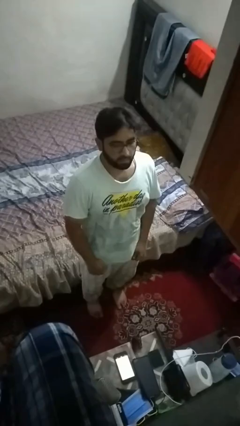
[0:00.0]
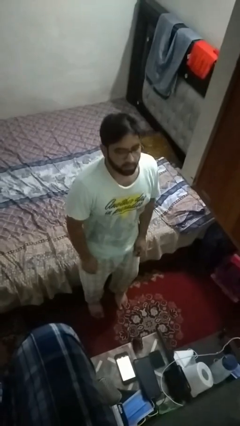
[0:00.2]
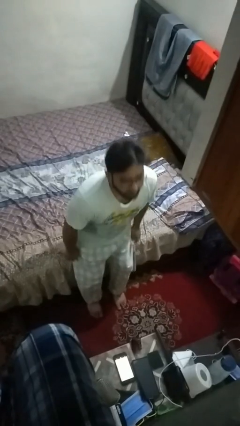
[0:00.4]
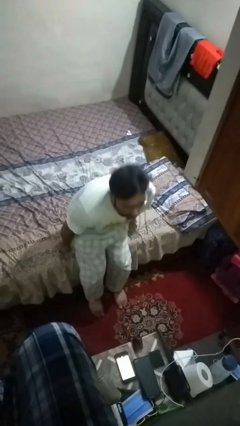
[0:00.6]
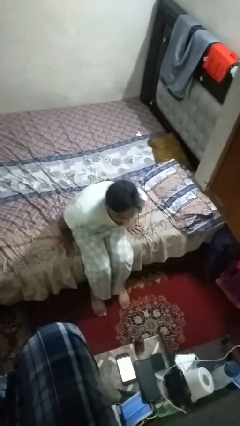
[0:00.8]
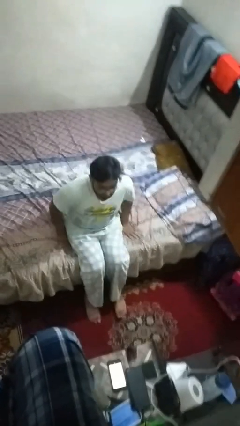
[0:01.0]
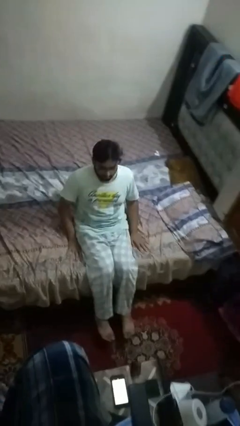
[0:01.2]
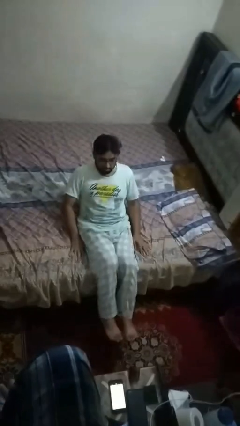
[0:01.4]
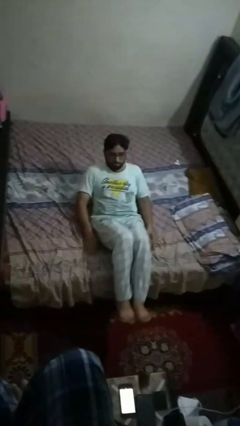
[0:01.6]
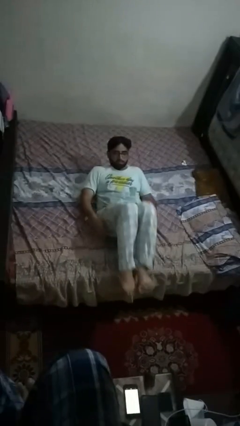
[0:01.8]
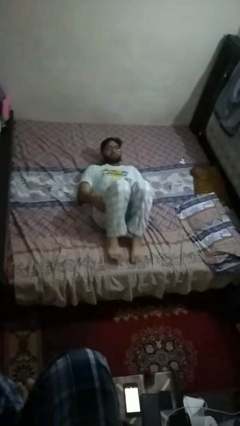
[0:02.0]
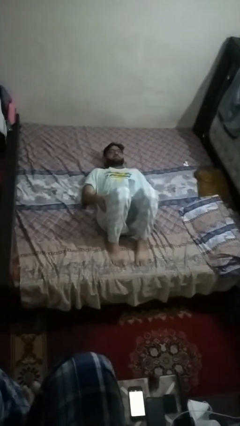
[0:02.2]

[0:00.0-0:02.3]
person lies down on bed

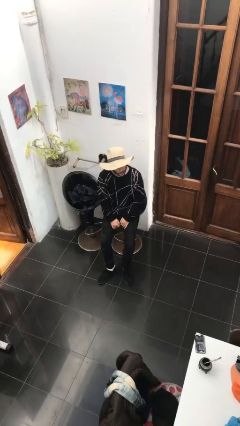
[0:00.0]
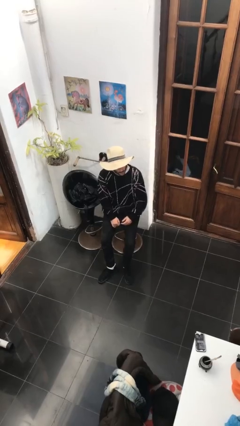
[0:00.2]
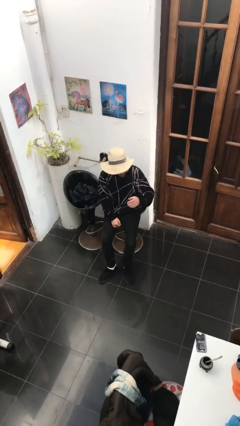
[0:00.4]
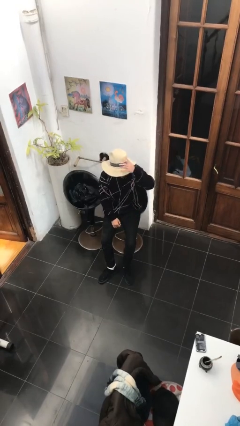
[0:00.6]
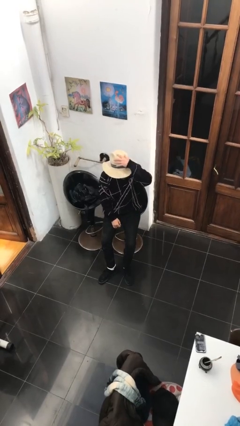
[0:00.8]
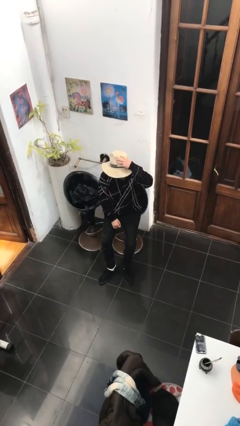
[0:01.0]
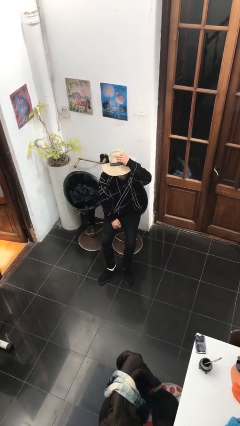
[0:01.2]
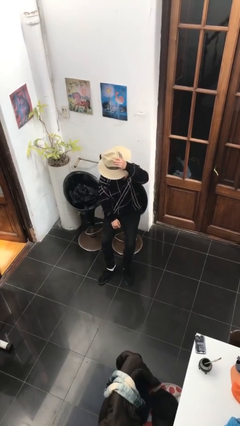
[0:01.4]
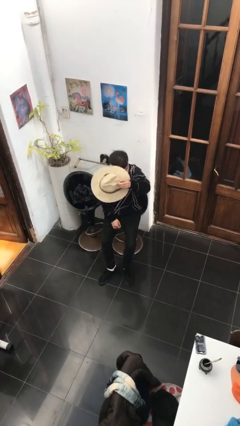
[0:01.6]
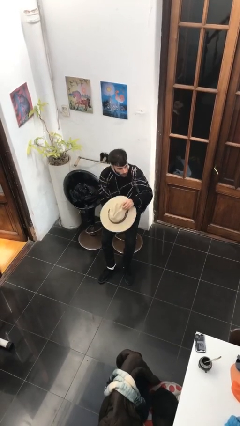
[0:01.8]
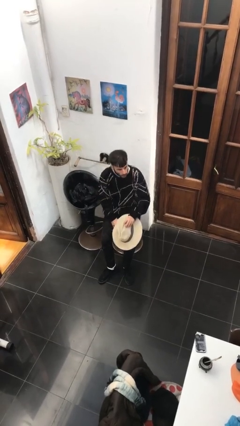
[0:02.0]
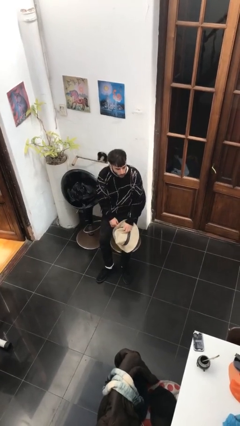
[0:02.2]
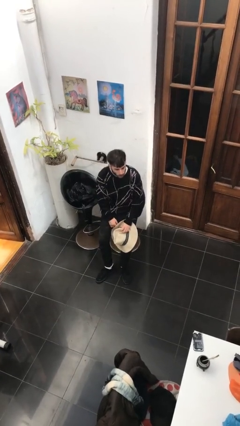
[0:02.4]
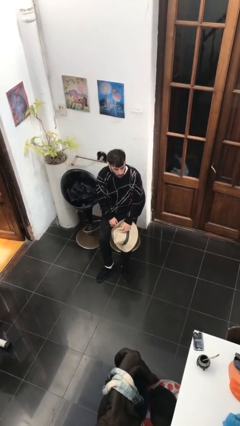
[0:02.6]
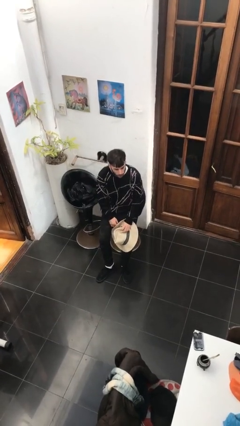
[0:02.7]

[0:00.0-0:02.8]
person takes off hat

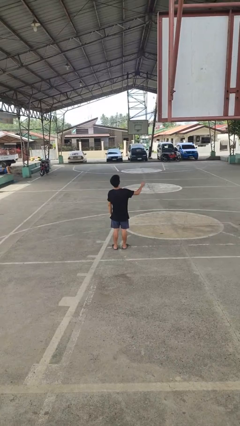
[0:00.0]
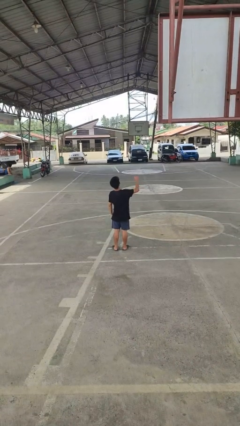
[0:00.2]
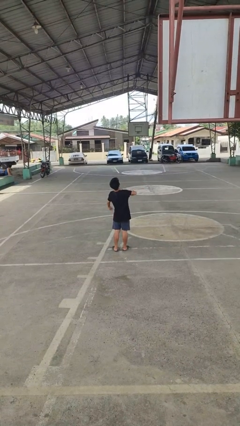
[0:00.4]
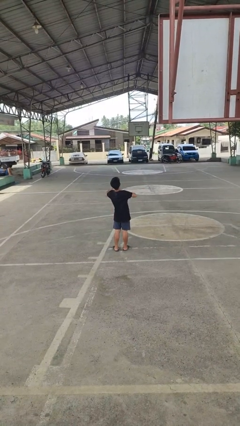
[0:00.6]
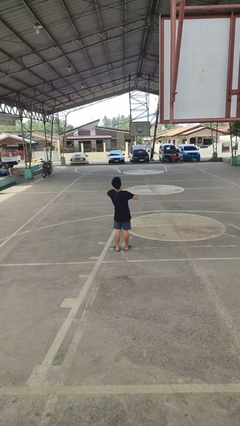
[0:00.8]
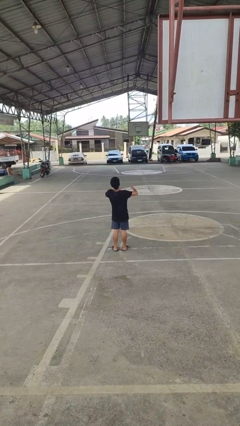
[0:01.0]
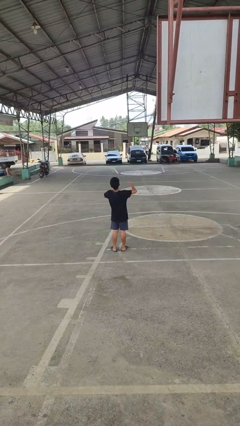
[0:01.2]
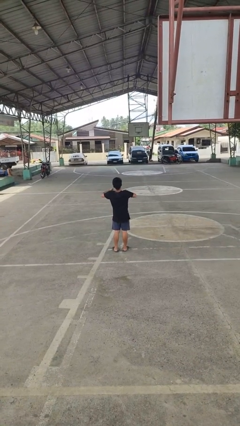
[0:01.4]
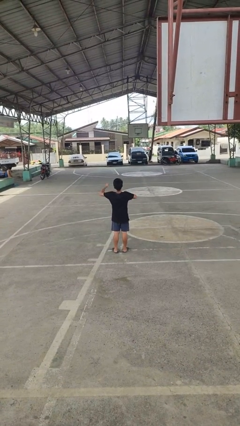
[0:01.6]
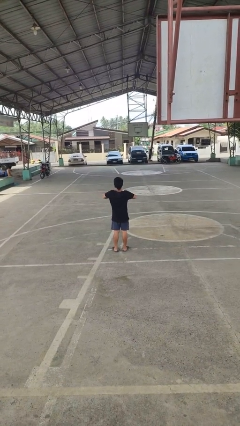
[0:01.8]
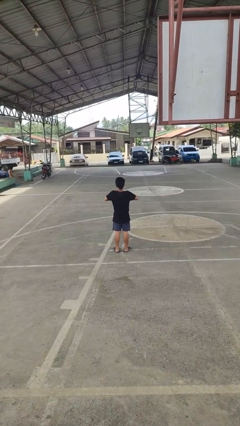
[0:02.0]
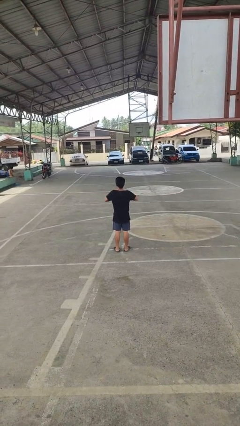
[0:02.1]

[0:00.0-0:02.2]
person drums on chest

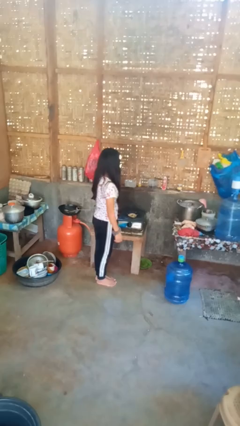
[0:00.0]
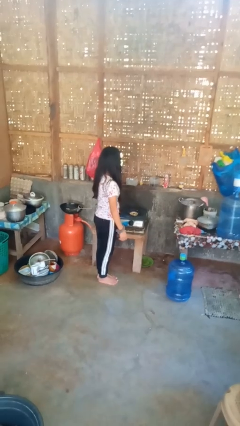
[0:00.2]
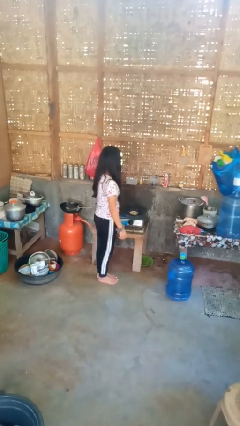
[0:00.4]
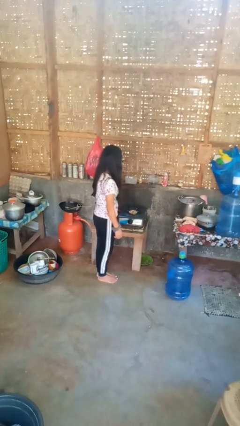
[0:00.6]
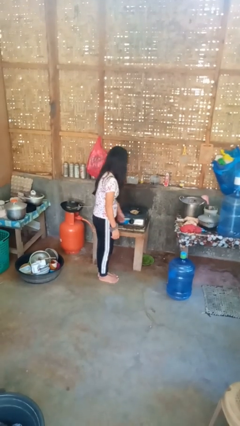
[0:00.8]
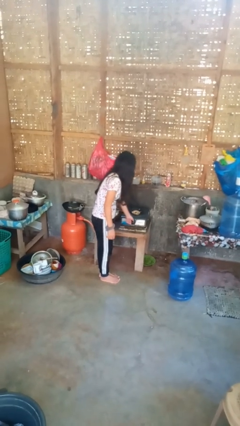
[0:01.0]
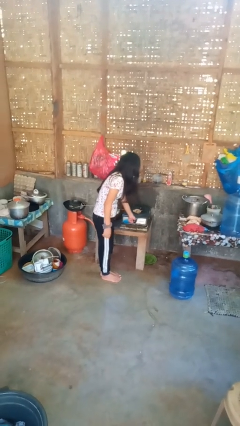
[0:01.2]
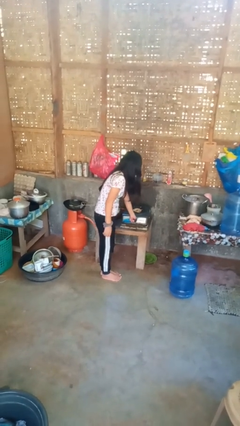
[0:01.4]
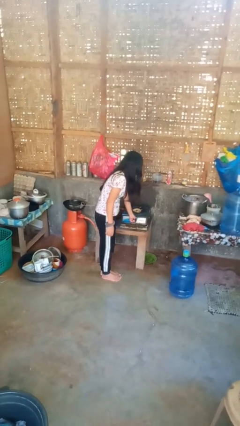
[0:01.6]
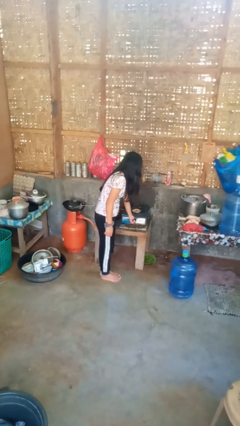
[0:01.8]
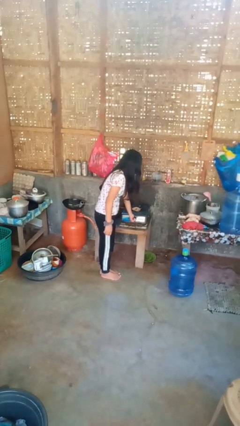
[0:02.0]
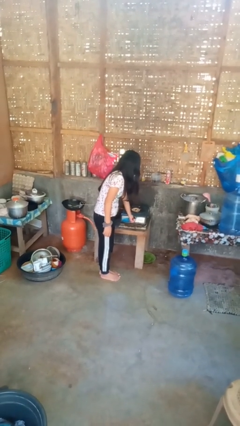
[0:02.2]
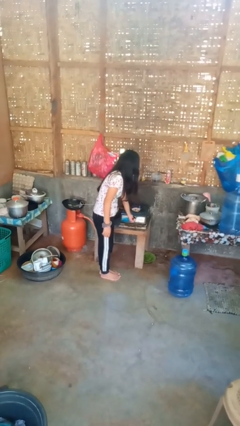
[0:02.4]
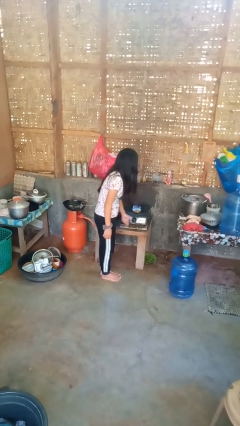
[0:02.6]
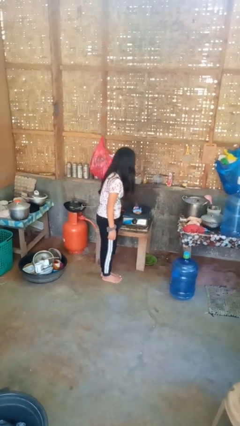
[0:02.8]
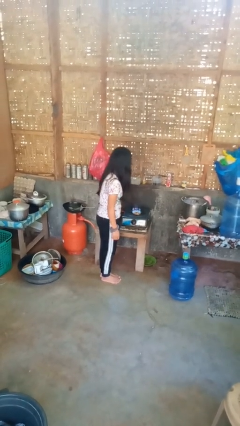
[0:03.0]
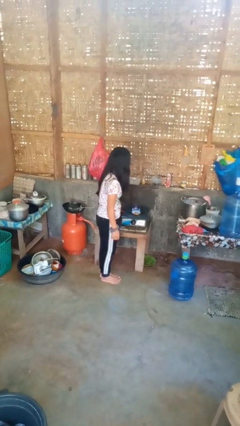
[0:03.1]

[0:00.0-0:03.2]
person turns on stovetop

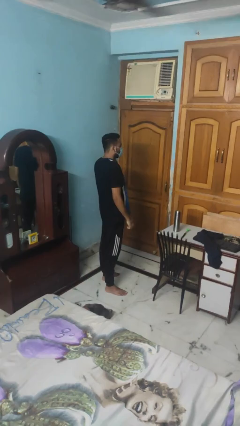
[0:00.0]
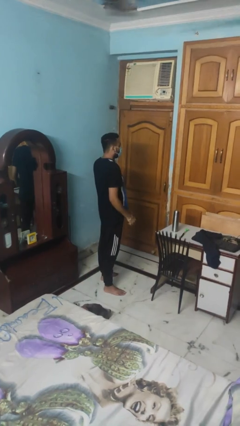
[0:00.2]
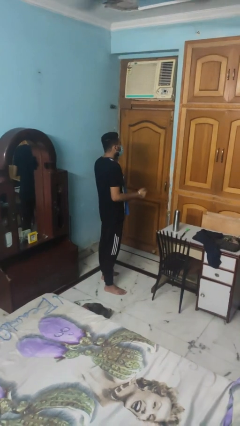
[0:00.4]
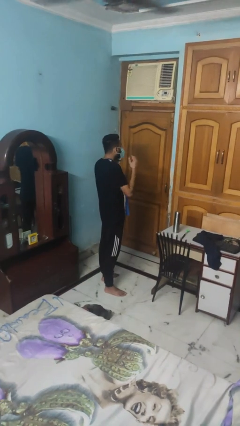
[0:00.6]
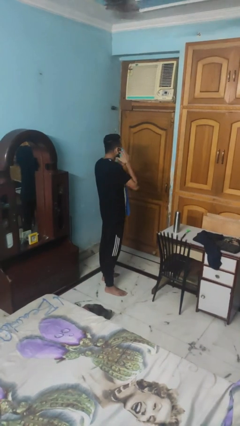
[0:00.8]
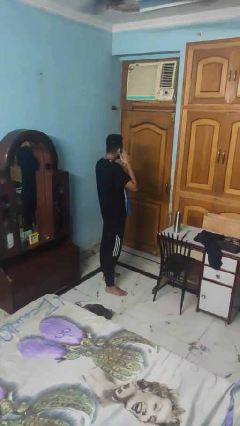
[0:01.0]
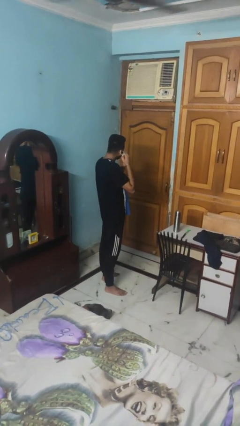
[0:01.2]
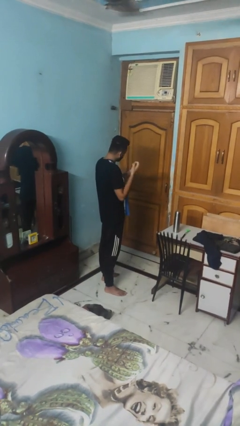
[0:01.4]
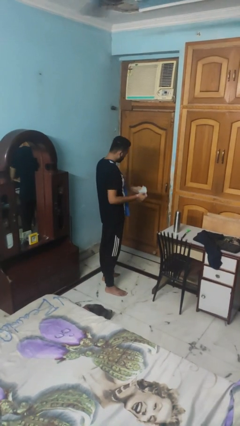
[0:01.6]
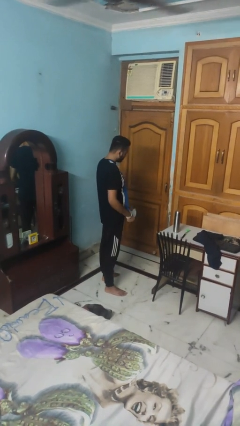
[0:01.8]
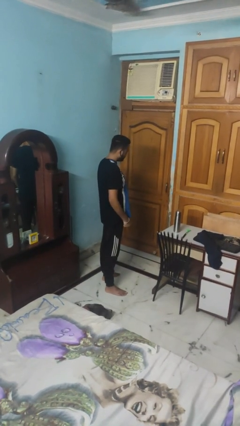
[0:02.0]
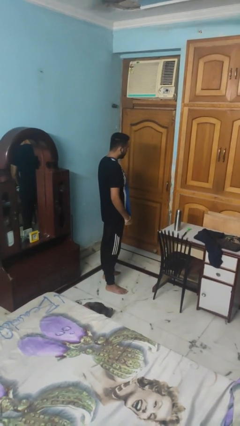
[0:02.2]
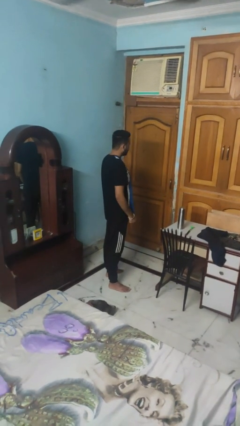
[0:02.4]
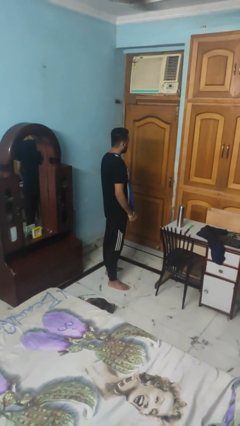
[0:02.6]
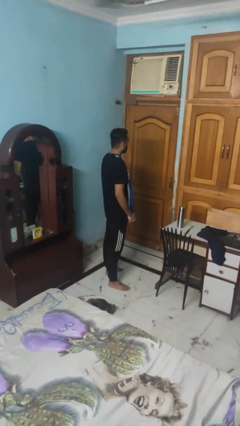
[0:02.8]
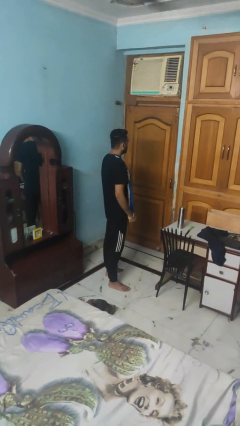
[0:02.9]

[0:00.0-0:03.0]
person takes off facemask

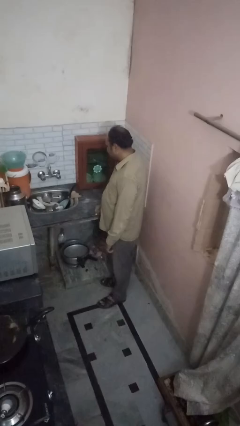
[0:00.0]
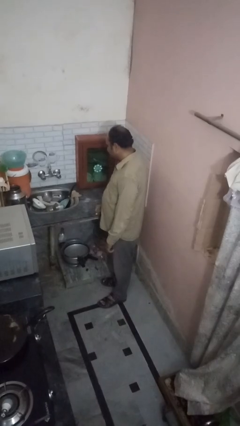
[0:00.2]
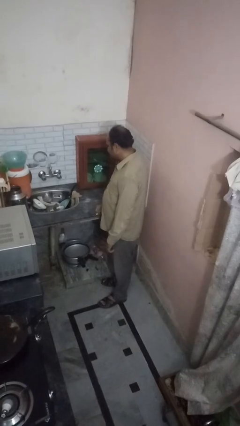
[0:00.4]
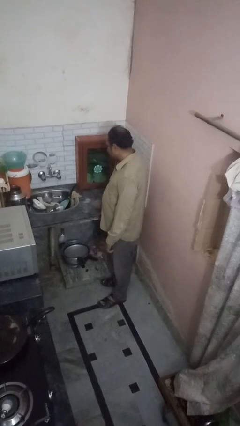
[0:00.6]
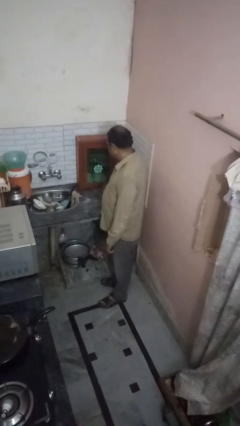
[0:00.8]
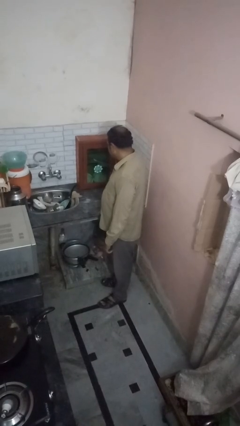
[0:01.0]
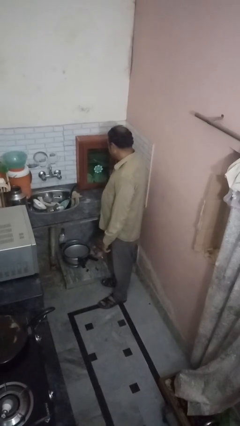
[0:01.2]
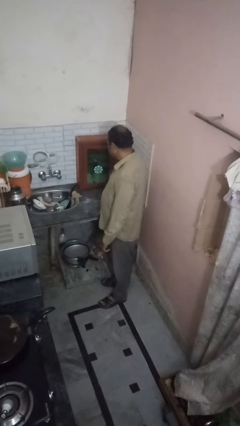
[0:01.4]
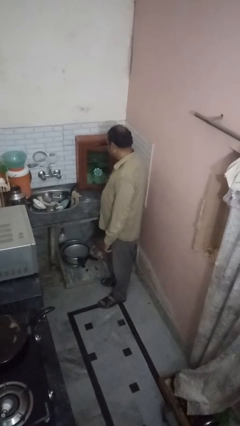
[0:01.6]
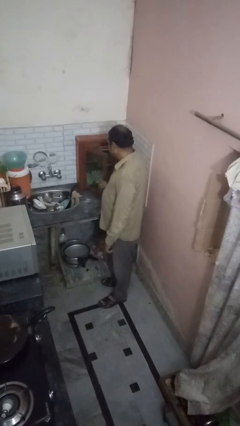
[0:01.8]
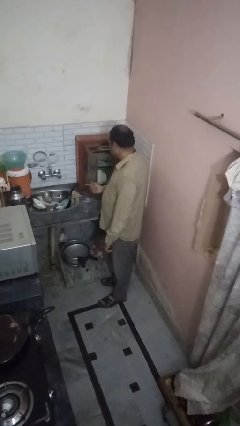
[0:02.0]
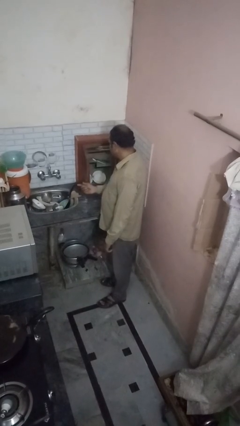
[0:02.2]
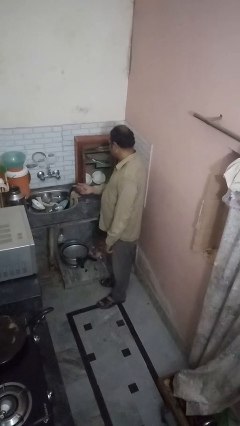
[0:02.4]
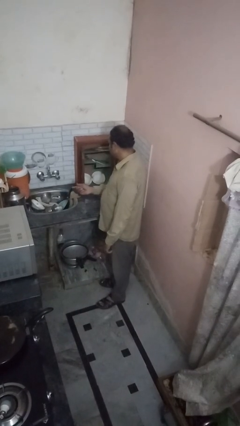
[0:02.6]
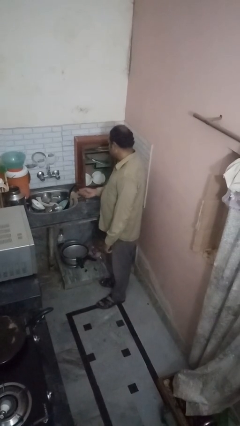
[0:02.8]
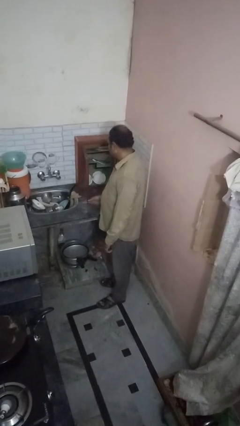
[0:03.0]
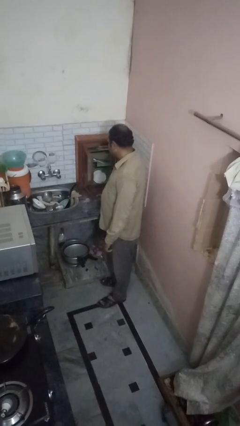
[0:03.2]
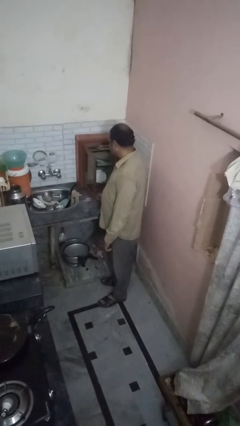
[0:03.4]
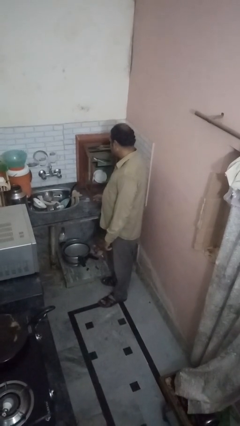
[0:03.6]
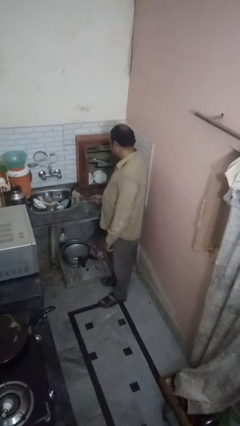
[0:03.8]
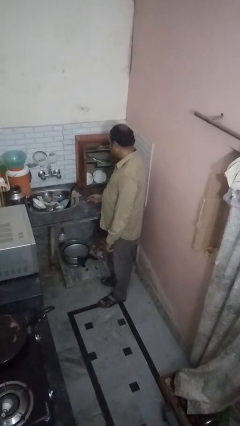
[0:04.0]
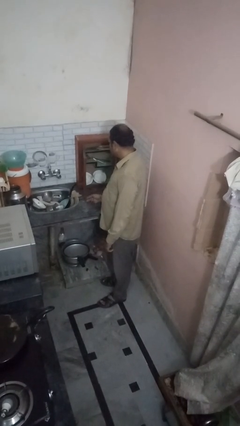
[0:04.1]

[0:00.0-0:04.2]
person opens cabinet
